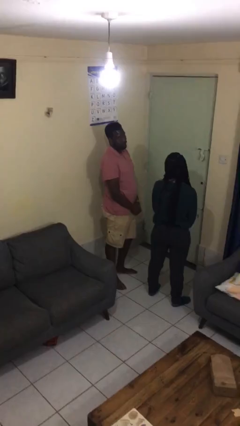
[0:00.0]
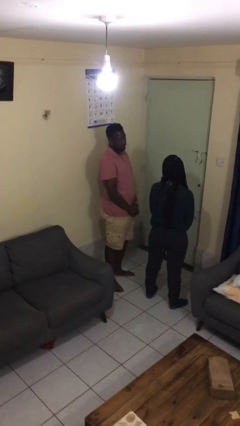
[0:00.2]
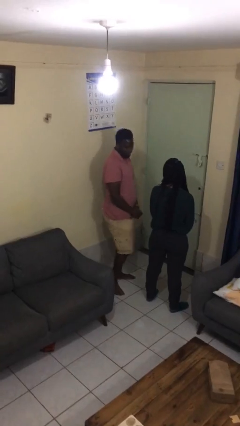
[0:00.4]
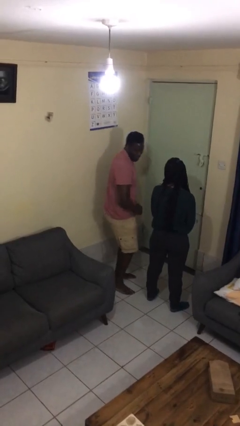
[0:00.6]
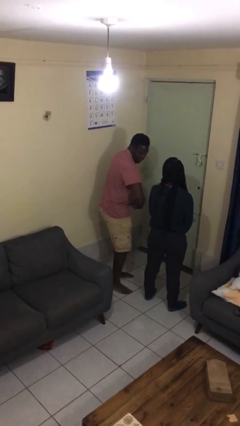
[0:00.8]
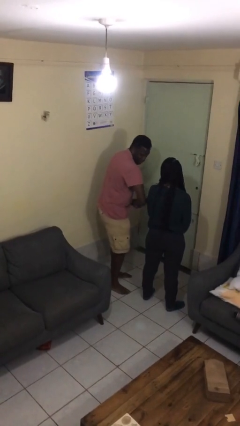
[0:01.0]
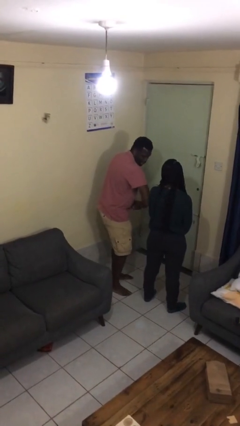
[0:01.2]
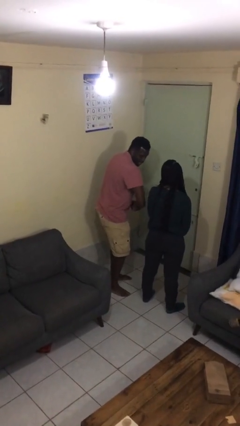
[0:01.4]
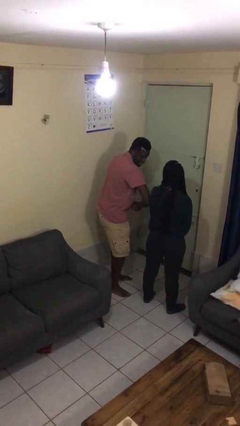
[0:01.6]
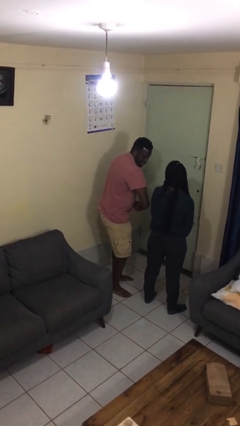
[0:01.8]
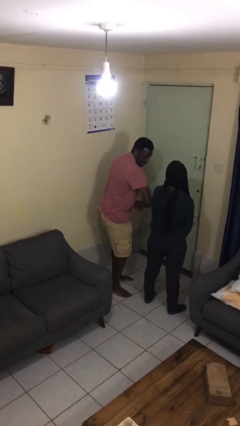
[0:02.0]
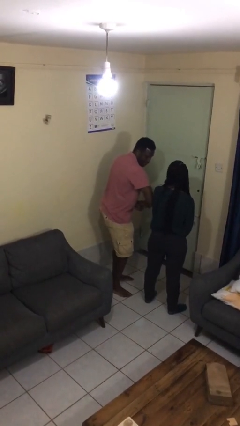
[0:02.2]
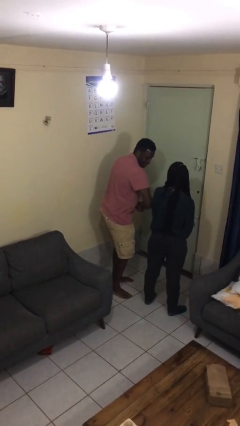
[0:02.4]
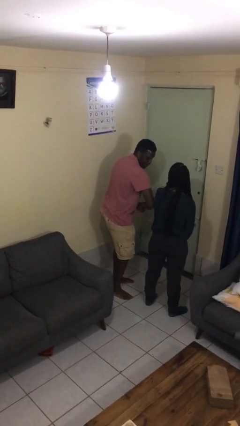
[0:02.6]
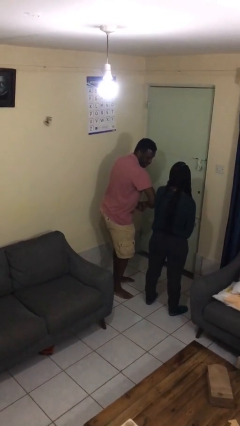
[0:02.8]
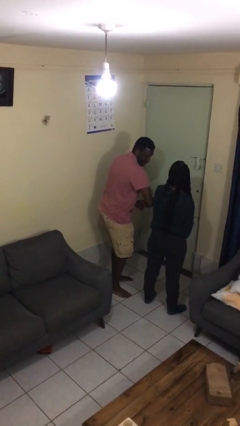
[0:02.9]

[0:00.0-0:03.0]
person nudges person with elbow

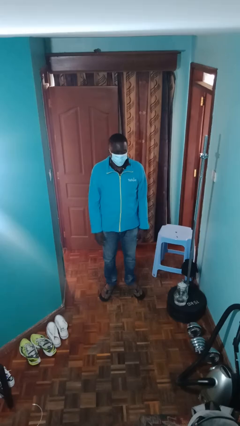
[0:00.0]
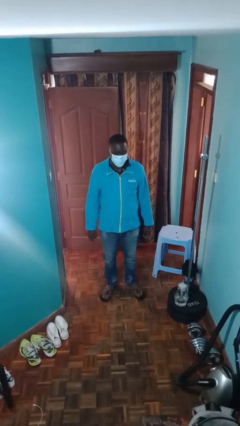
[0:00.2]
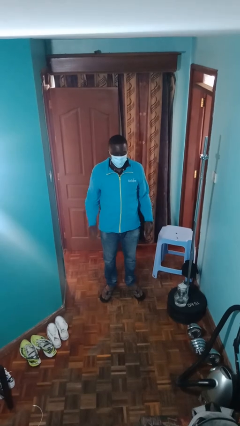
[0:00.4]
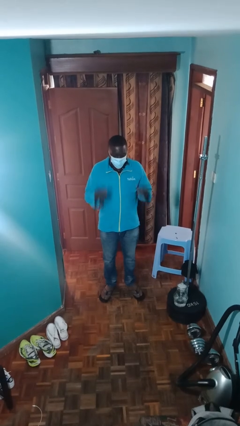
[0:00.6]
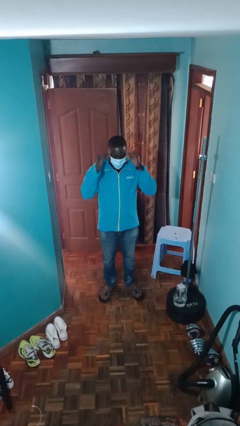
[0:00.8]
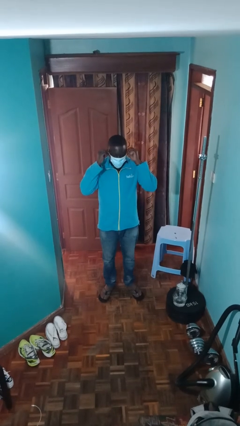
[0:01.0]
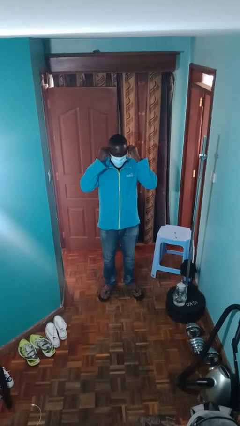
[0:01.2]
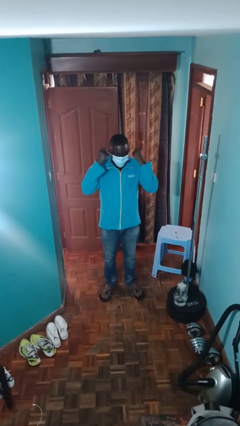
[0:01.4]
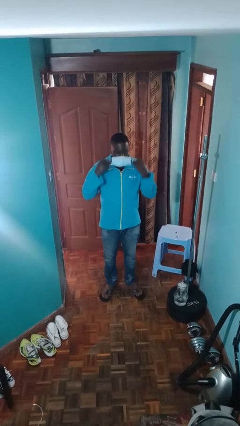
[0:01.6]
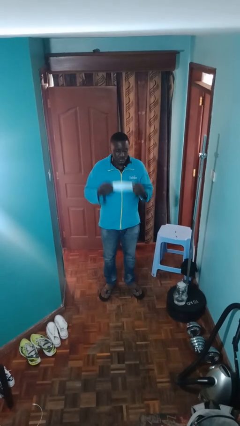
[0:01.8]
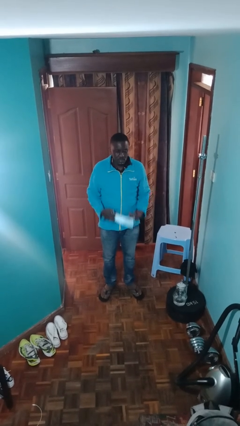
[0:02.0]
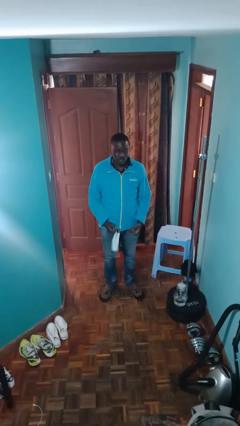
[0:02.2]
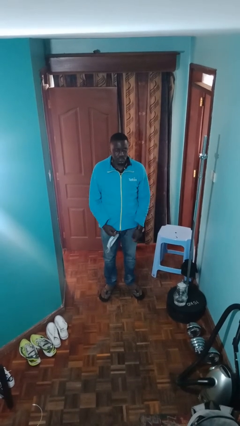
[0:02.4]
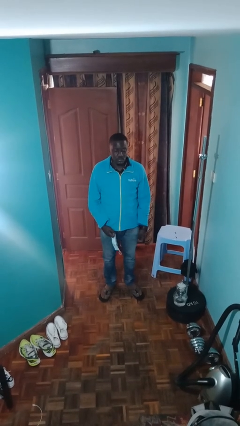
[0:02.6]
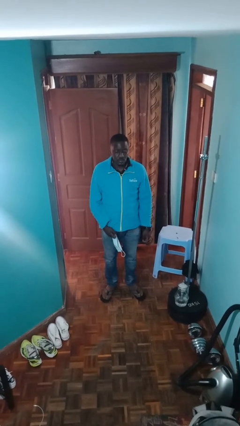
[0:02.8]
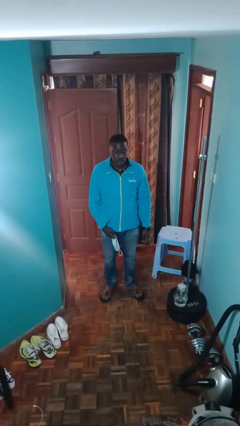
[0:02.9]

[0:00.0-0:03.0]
person takes off facemask

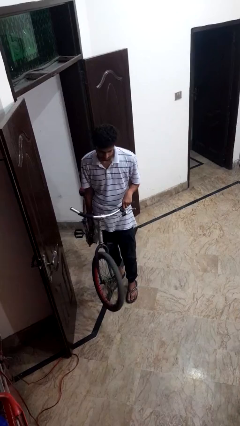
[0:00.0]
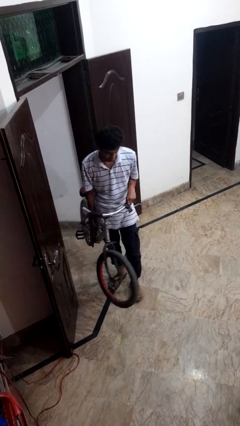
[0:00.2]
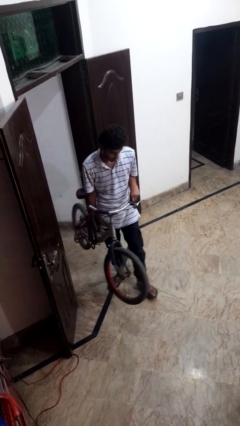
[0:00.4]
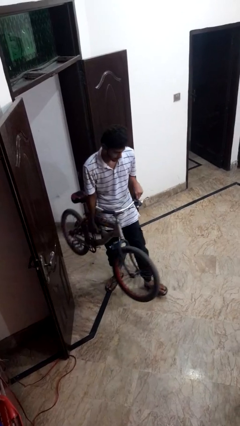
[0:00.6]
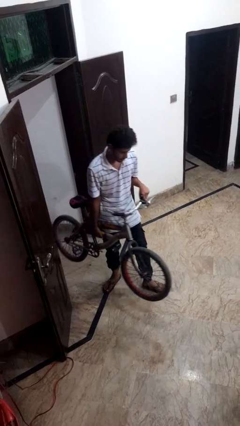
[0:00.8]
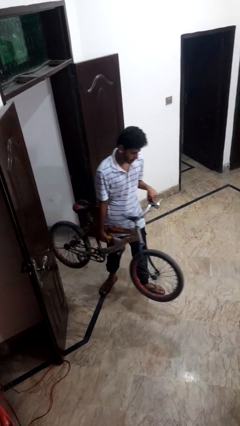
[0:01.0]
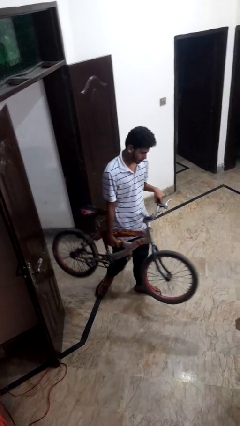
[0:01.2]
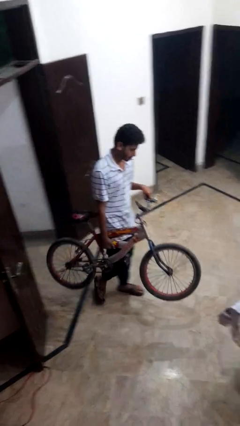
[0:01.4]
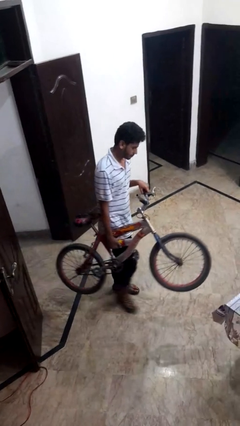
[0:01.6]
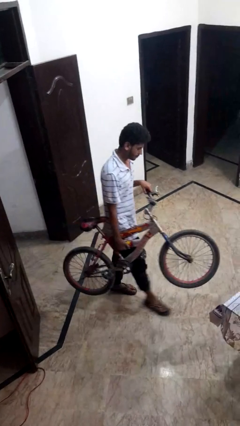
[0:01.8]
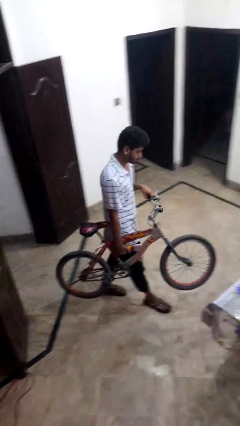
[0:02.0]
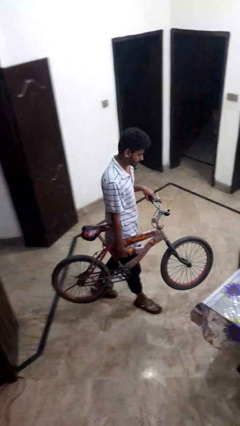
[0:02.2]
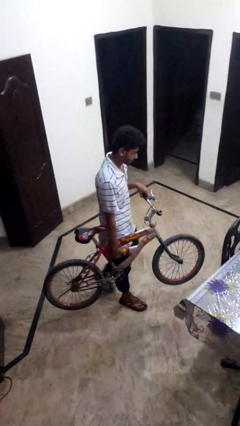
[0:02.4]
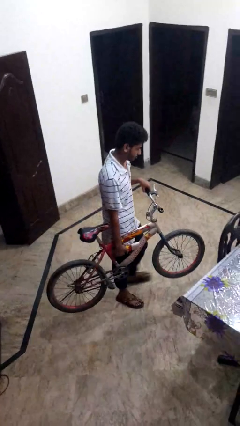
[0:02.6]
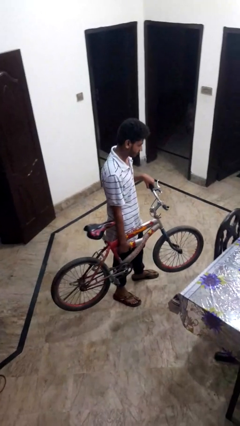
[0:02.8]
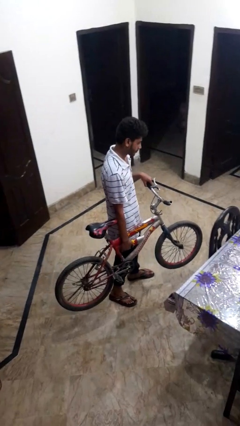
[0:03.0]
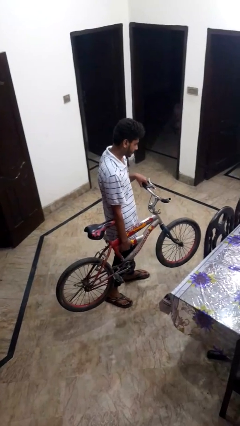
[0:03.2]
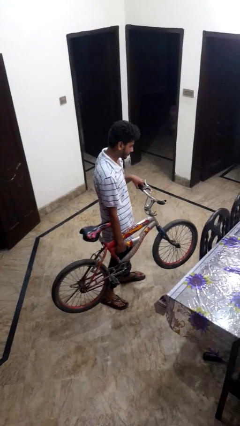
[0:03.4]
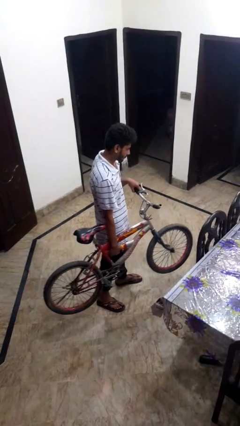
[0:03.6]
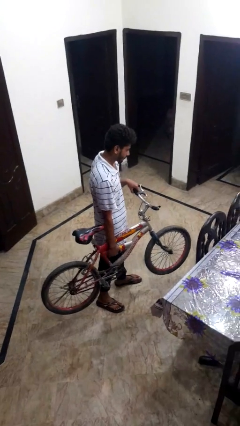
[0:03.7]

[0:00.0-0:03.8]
person carries bicycle

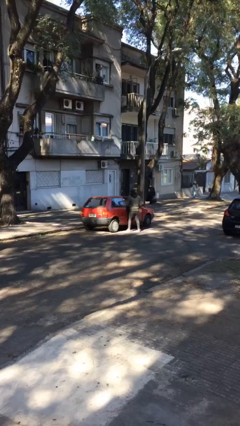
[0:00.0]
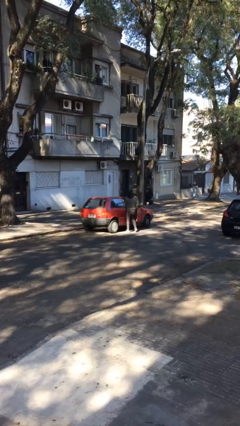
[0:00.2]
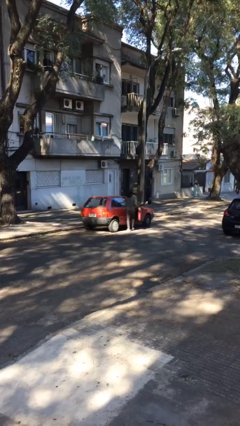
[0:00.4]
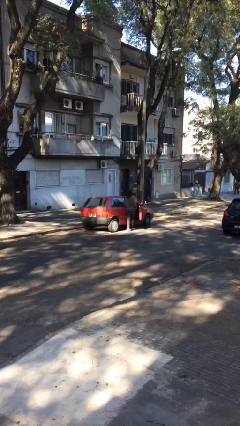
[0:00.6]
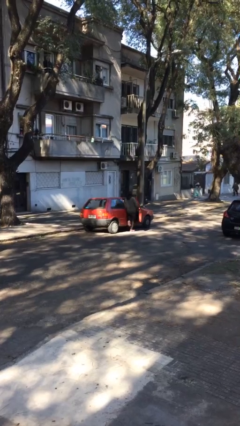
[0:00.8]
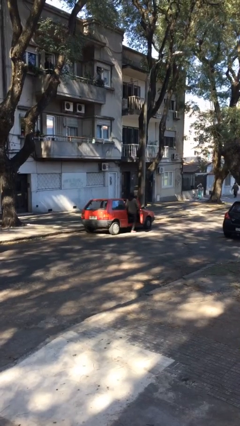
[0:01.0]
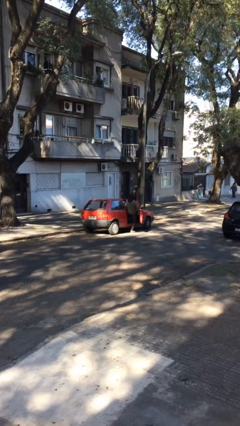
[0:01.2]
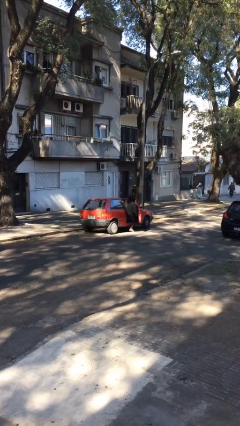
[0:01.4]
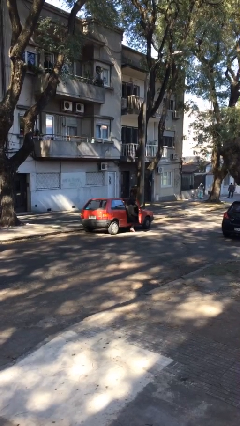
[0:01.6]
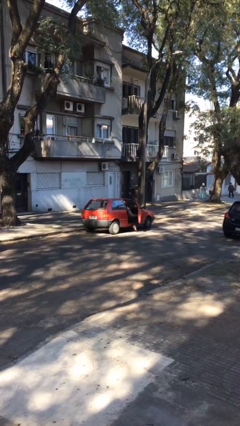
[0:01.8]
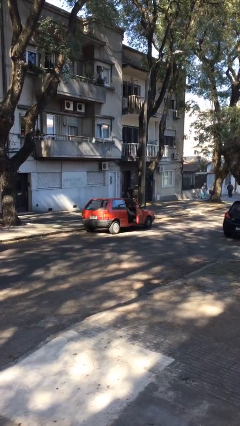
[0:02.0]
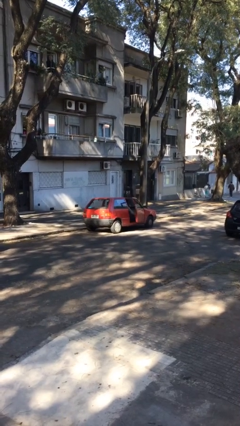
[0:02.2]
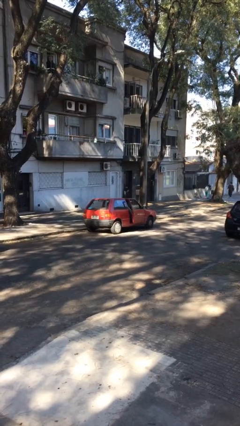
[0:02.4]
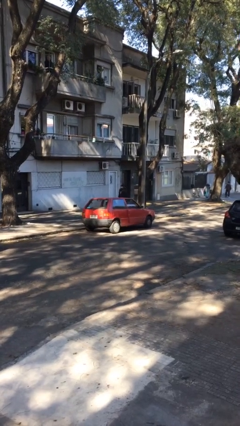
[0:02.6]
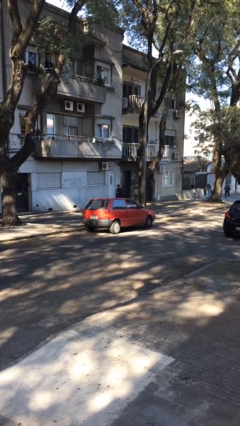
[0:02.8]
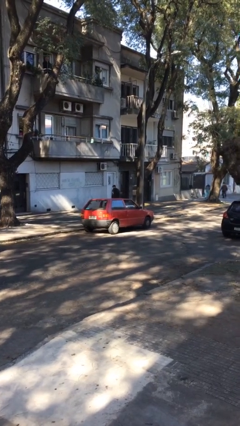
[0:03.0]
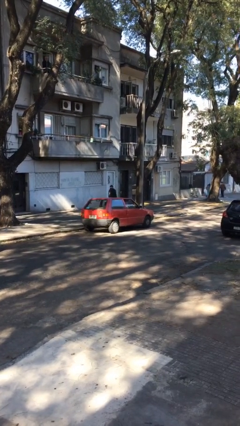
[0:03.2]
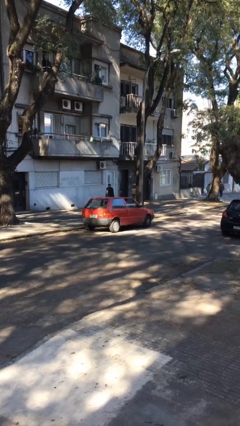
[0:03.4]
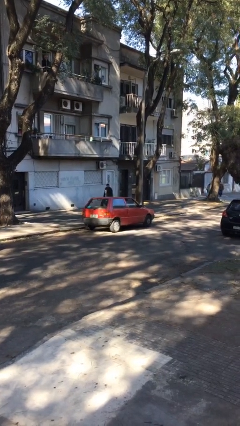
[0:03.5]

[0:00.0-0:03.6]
car picks up person

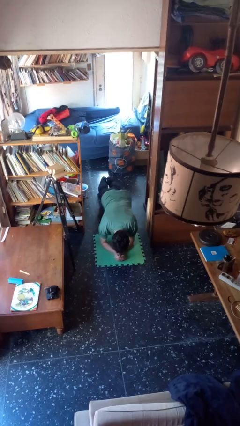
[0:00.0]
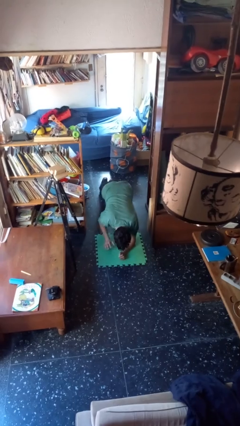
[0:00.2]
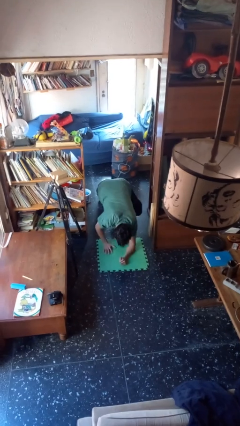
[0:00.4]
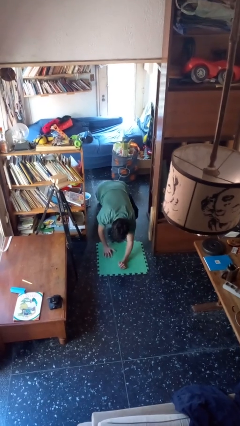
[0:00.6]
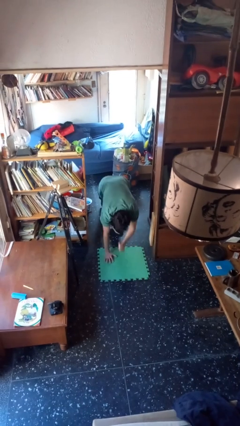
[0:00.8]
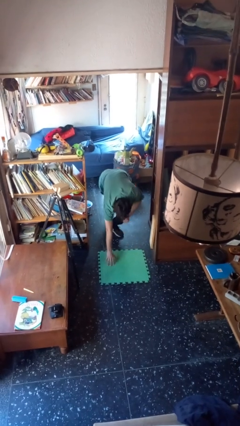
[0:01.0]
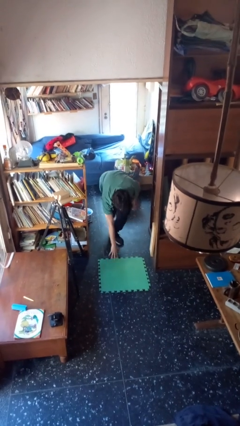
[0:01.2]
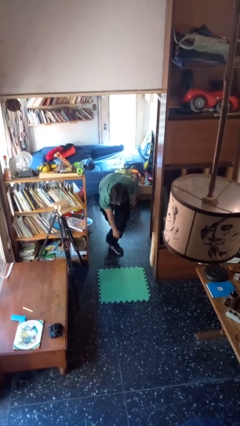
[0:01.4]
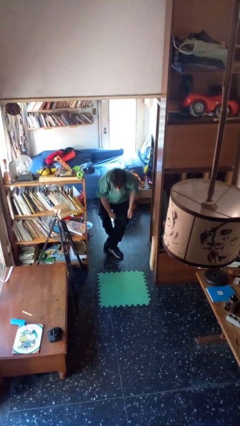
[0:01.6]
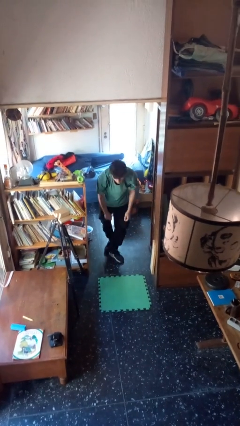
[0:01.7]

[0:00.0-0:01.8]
person stands up from floor

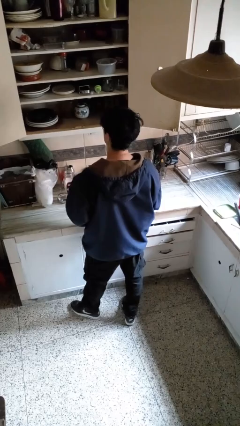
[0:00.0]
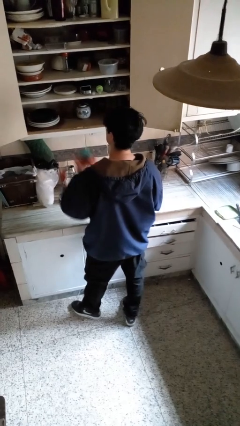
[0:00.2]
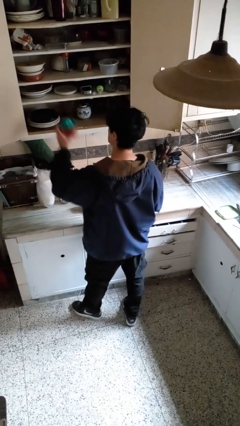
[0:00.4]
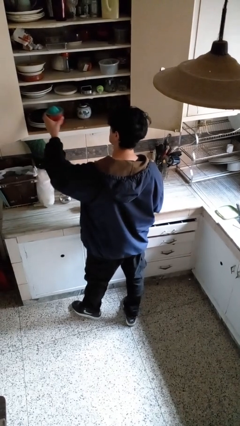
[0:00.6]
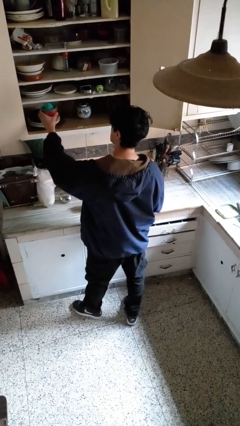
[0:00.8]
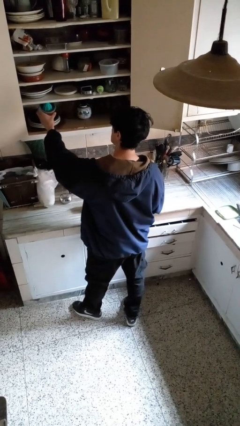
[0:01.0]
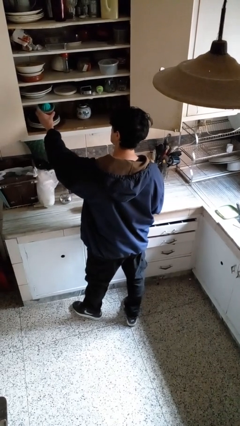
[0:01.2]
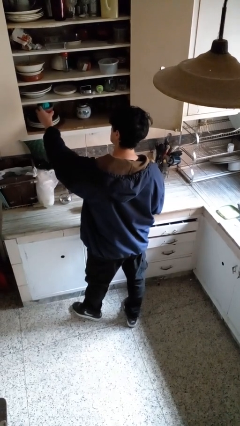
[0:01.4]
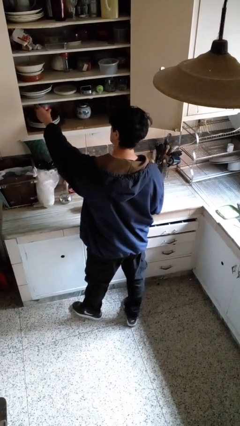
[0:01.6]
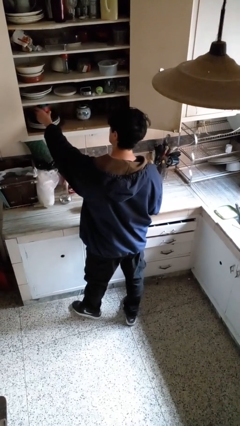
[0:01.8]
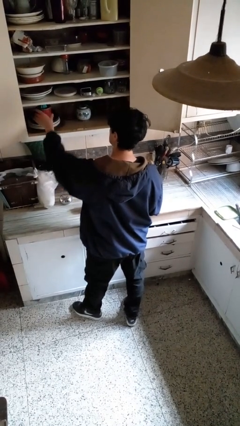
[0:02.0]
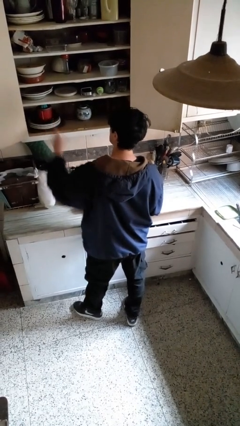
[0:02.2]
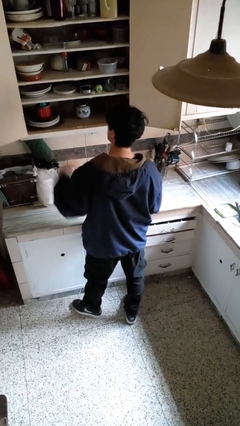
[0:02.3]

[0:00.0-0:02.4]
person puts object in cabinet
